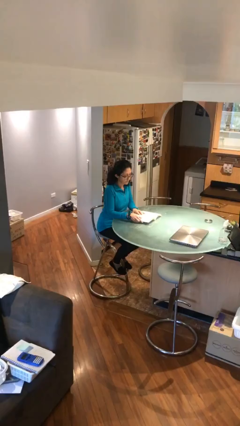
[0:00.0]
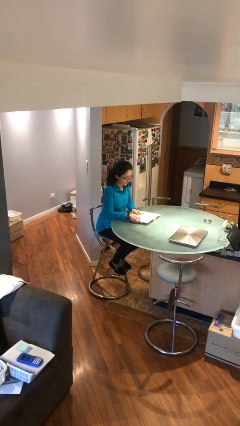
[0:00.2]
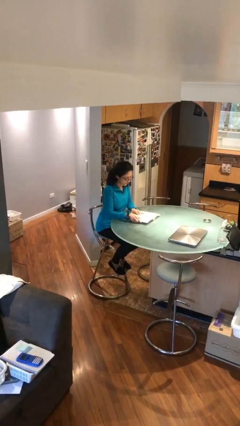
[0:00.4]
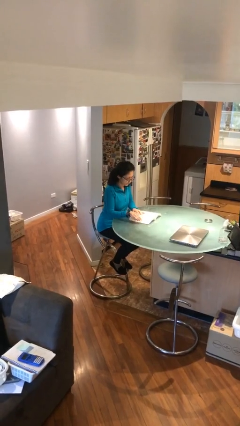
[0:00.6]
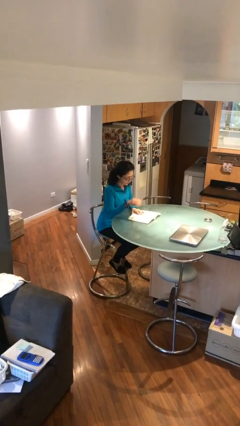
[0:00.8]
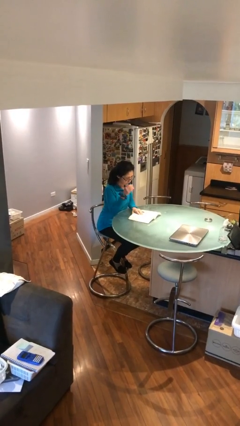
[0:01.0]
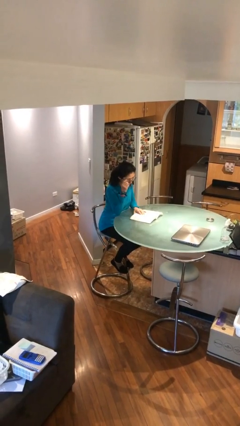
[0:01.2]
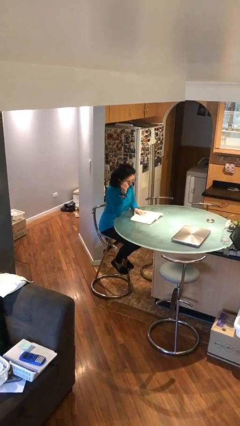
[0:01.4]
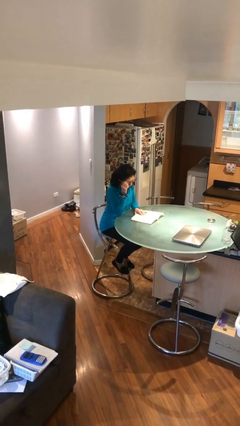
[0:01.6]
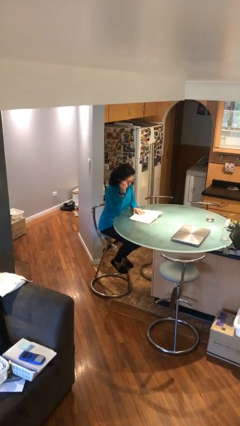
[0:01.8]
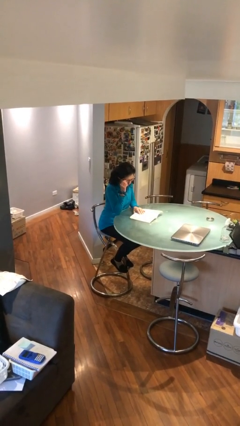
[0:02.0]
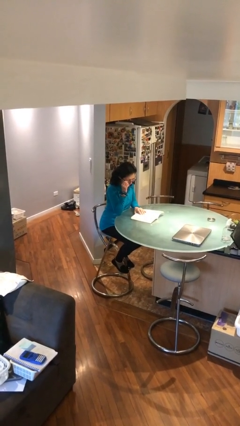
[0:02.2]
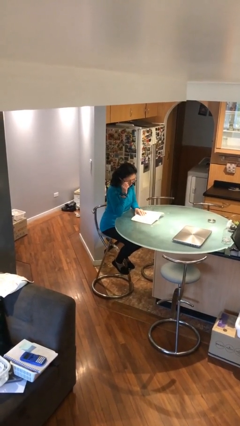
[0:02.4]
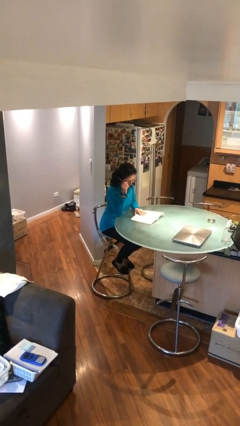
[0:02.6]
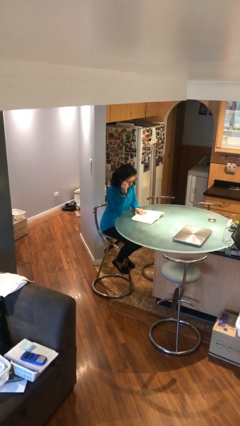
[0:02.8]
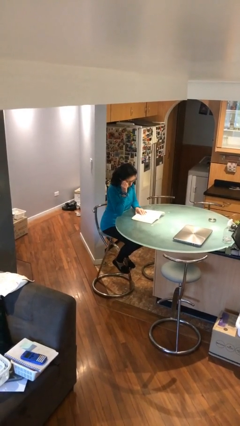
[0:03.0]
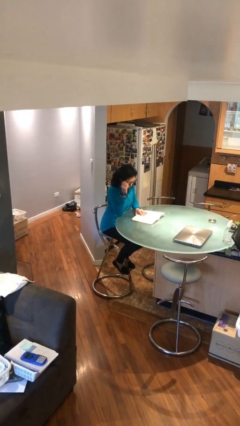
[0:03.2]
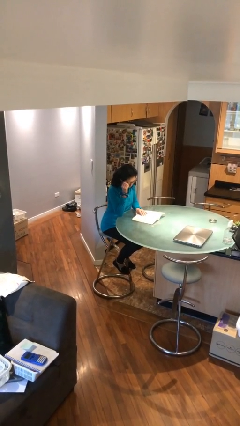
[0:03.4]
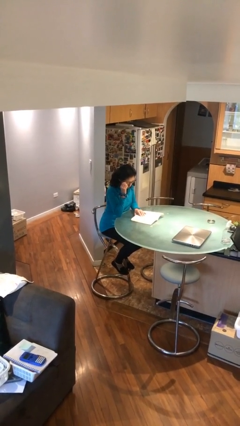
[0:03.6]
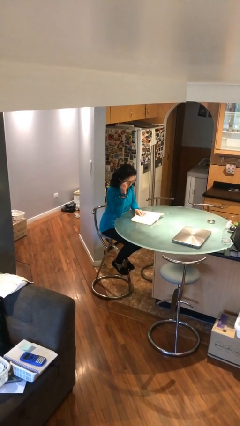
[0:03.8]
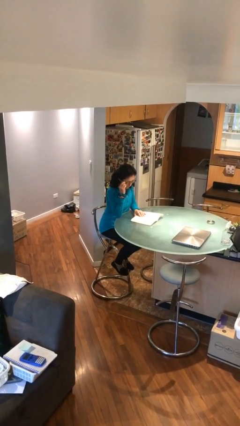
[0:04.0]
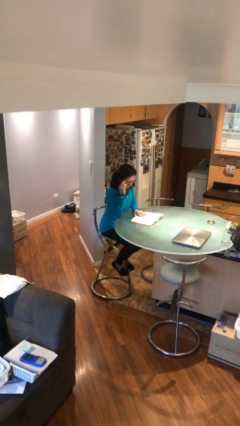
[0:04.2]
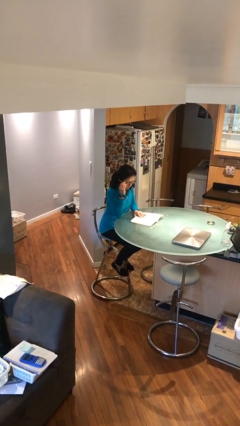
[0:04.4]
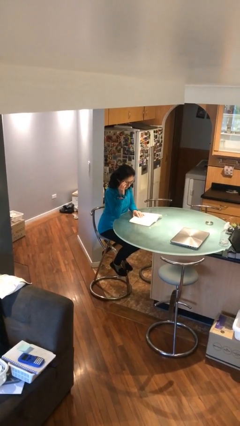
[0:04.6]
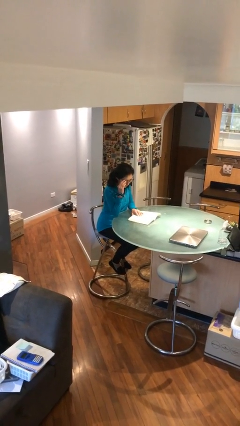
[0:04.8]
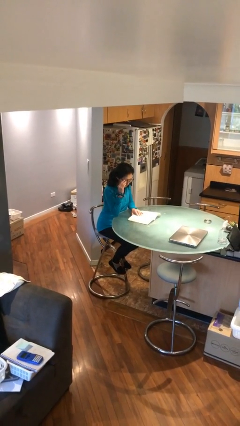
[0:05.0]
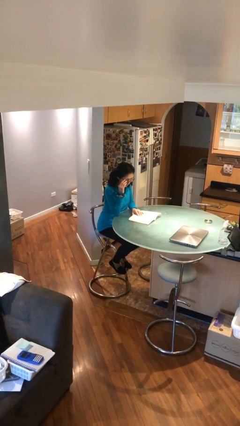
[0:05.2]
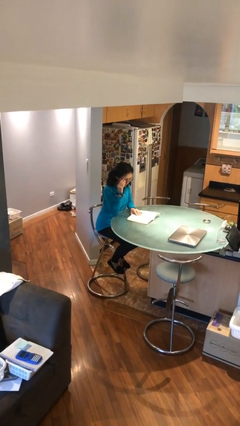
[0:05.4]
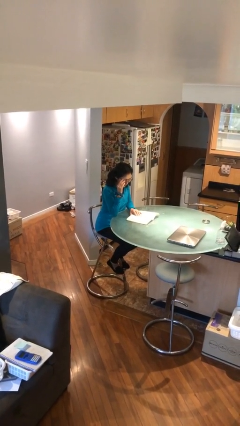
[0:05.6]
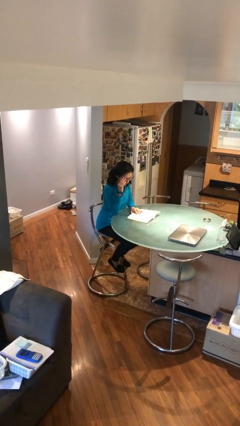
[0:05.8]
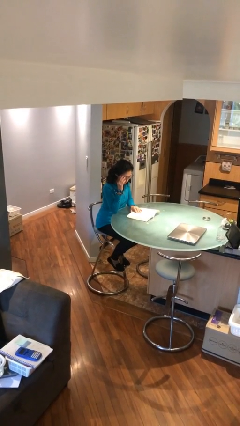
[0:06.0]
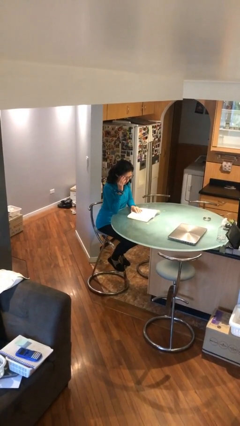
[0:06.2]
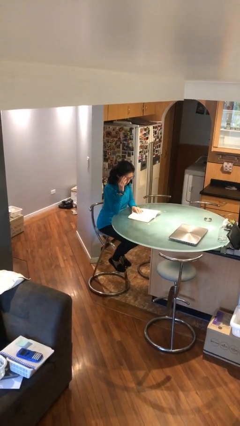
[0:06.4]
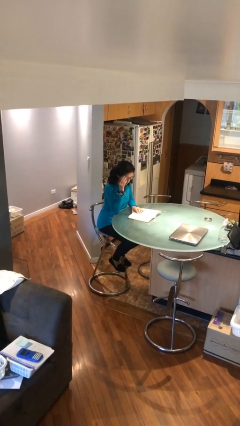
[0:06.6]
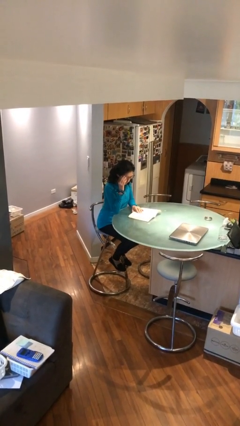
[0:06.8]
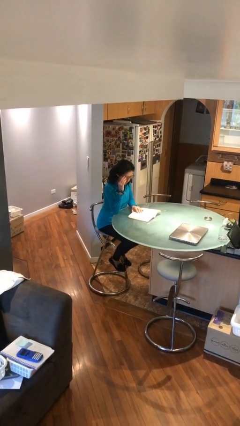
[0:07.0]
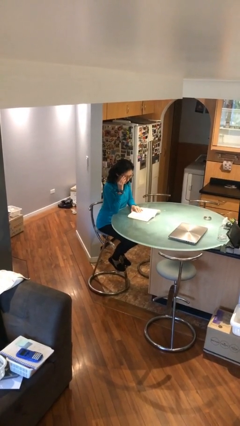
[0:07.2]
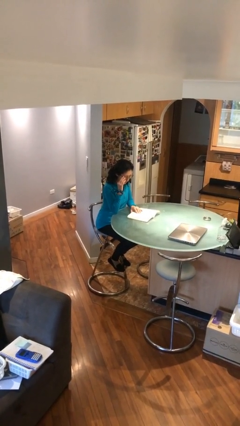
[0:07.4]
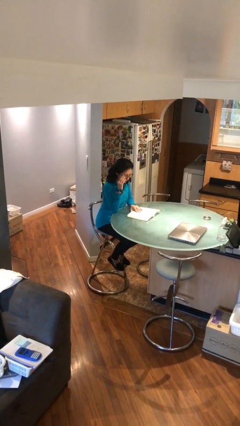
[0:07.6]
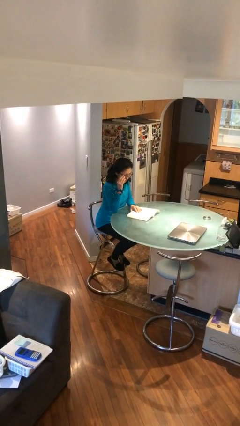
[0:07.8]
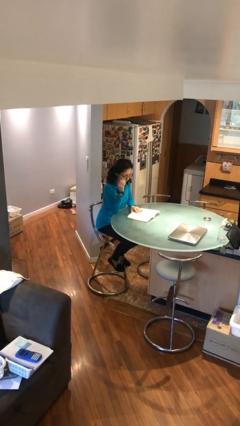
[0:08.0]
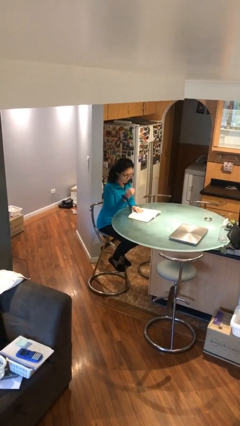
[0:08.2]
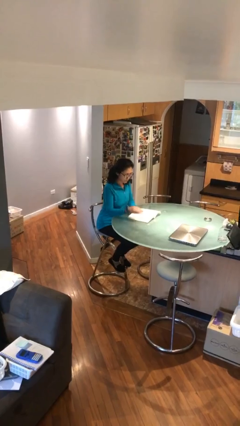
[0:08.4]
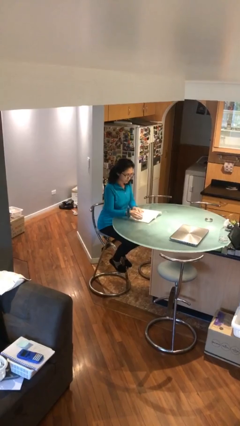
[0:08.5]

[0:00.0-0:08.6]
person reads document

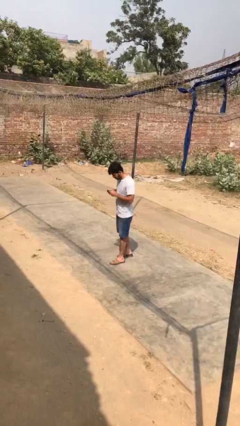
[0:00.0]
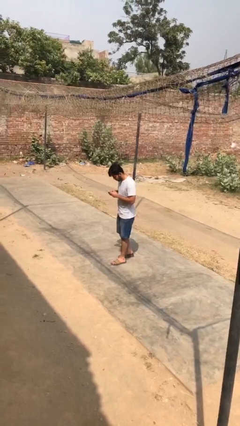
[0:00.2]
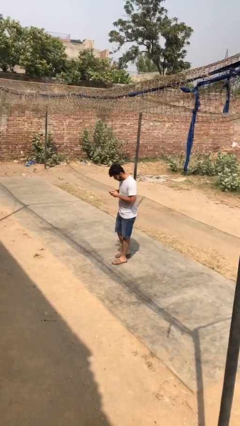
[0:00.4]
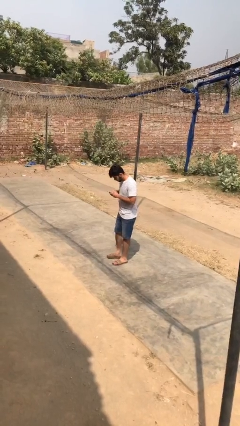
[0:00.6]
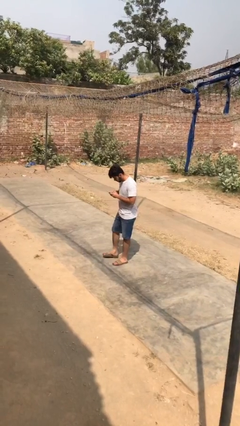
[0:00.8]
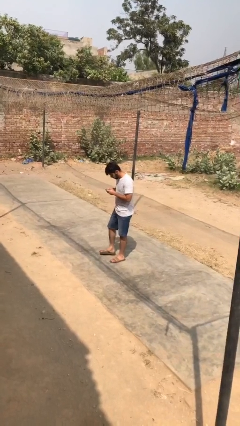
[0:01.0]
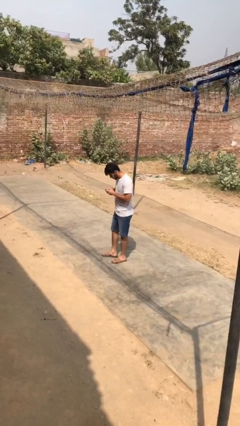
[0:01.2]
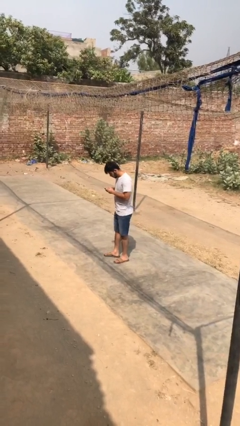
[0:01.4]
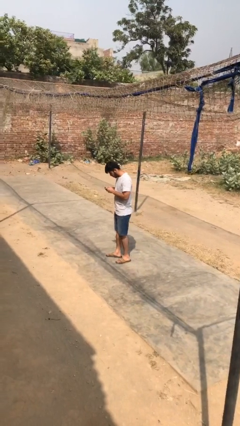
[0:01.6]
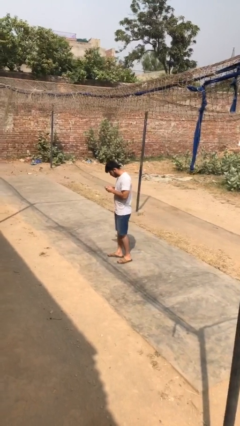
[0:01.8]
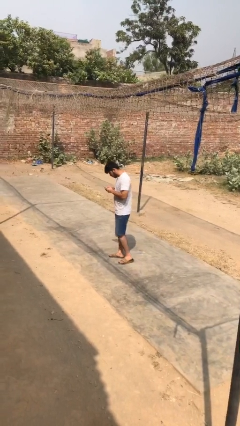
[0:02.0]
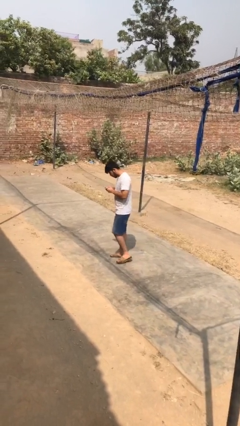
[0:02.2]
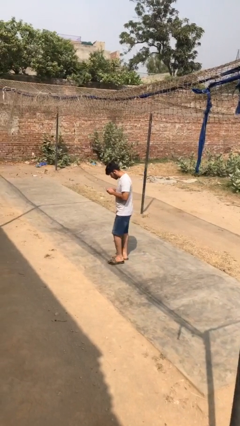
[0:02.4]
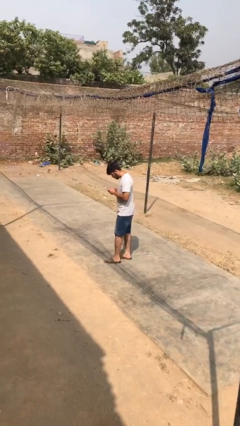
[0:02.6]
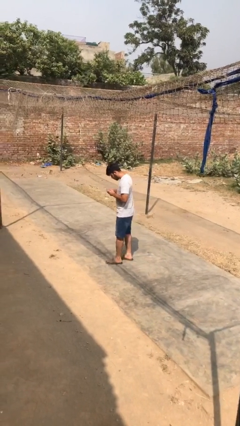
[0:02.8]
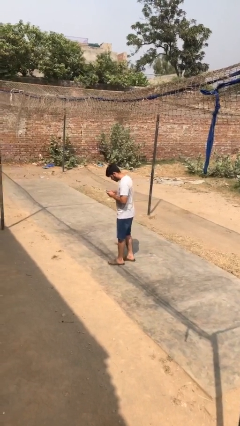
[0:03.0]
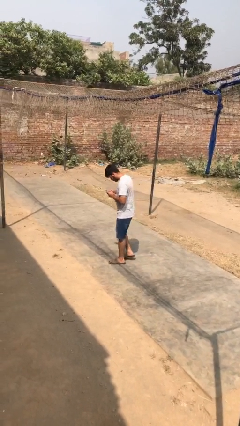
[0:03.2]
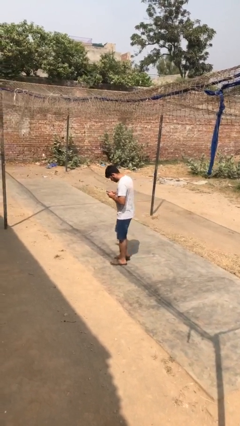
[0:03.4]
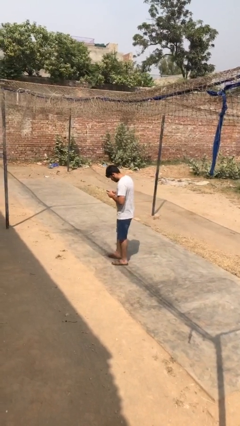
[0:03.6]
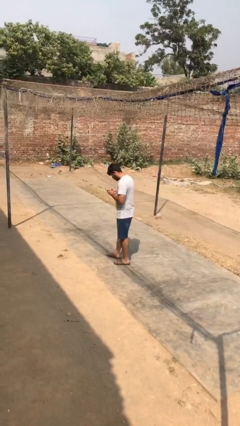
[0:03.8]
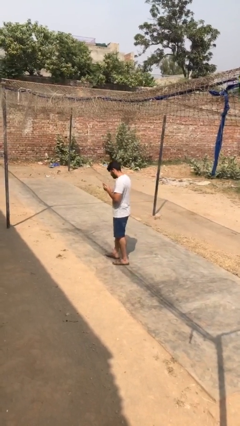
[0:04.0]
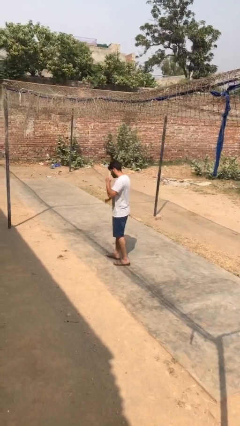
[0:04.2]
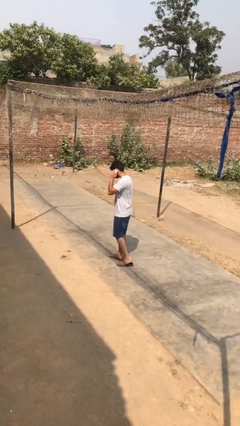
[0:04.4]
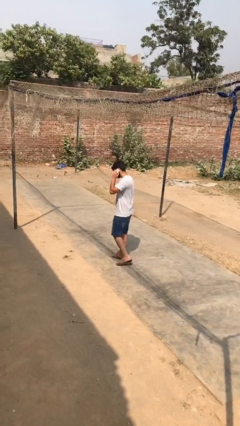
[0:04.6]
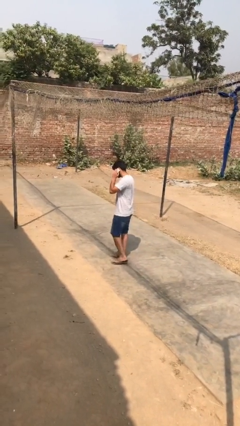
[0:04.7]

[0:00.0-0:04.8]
person texts on phone

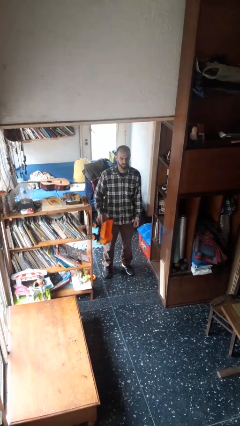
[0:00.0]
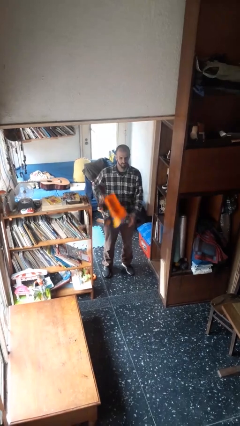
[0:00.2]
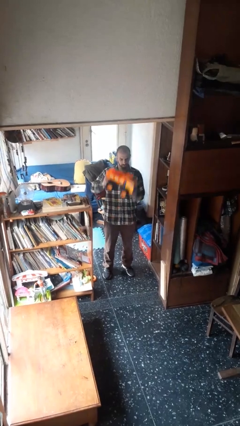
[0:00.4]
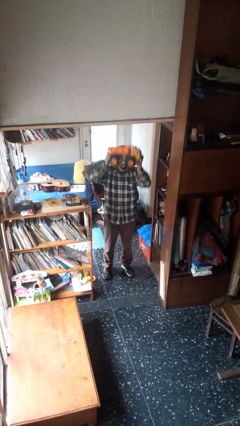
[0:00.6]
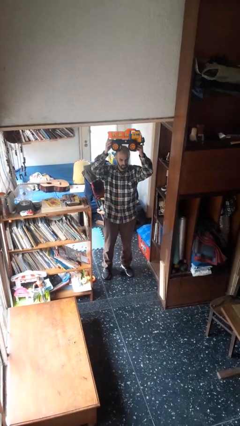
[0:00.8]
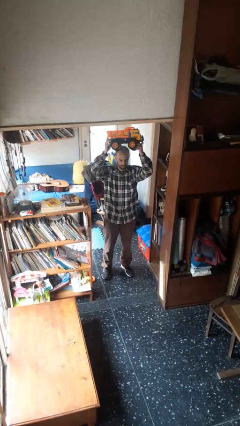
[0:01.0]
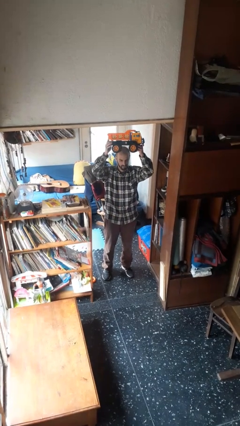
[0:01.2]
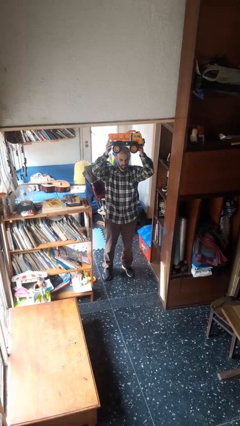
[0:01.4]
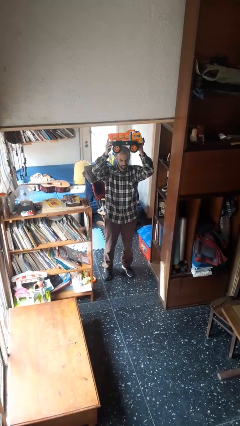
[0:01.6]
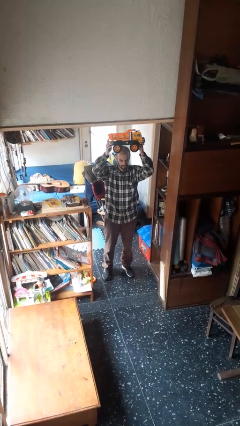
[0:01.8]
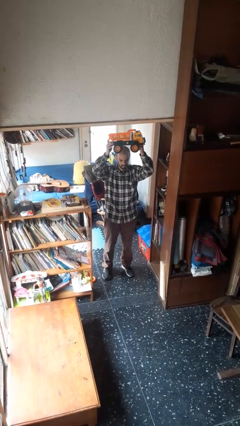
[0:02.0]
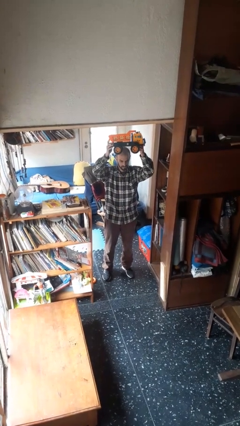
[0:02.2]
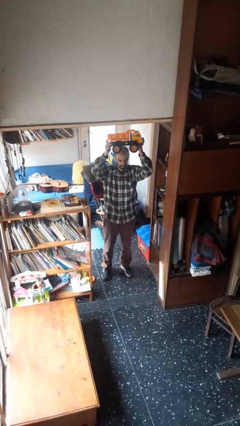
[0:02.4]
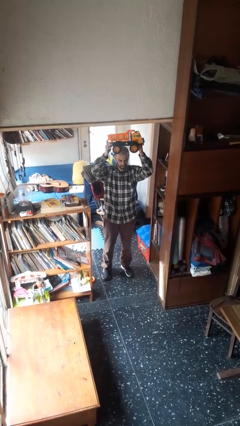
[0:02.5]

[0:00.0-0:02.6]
person holds object above head

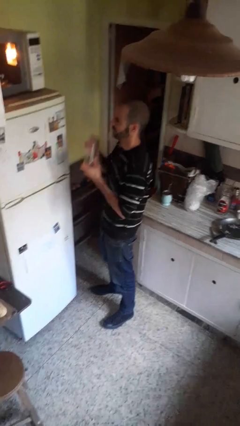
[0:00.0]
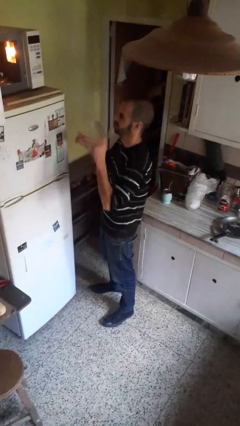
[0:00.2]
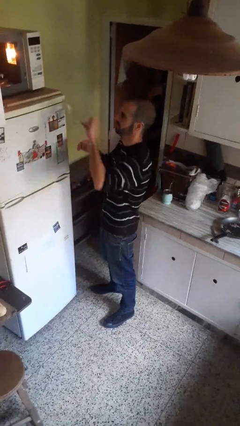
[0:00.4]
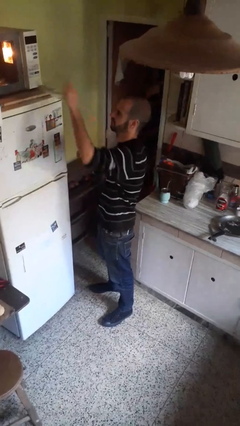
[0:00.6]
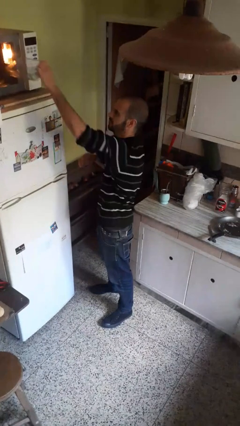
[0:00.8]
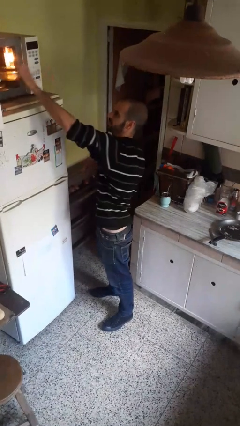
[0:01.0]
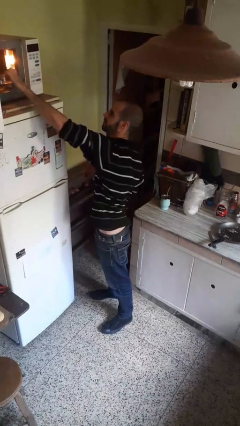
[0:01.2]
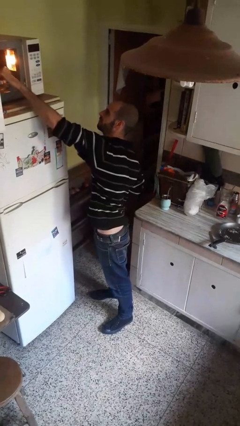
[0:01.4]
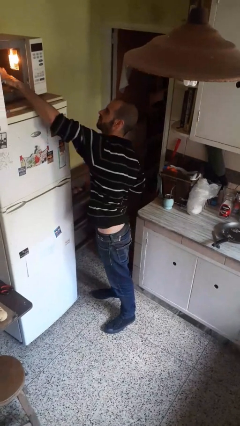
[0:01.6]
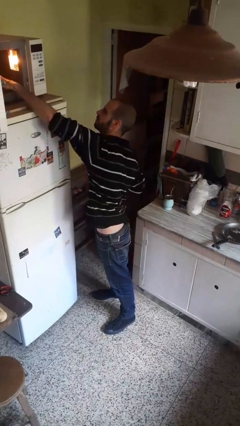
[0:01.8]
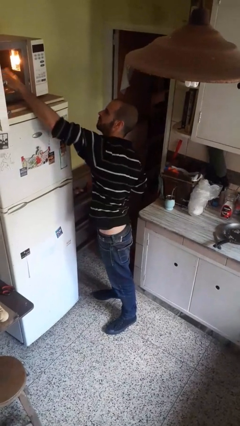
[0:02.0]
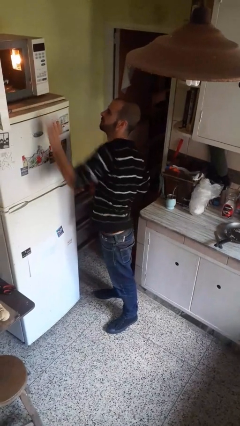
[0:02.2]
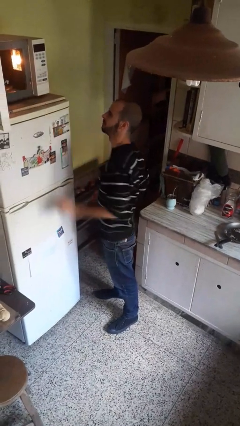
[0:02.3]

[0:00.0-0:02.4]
person puts object into microwave
